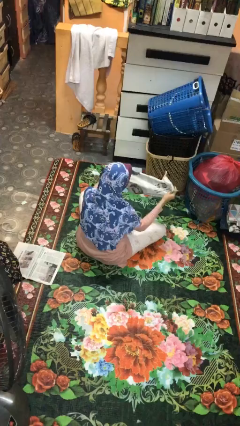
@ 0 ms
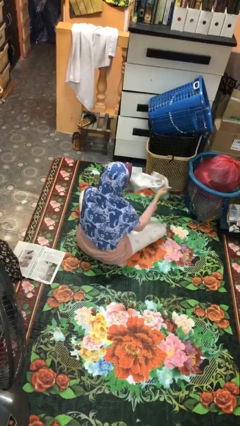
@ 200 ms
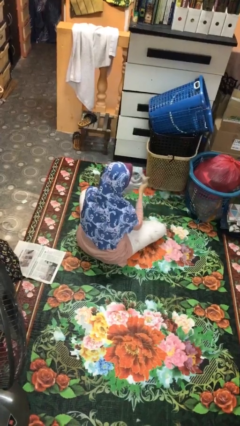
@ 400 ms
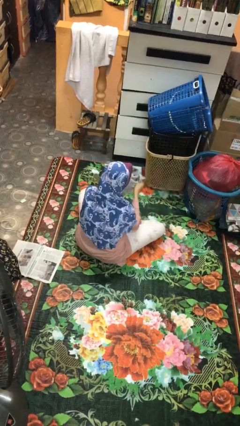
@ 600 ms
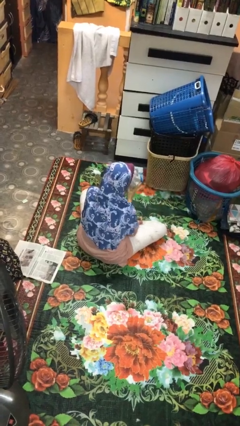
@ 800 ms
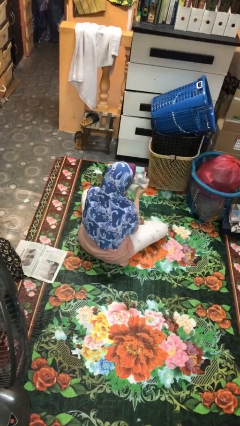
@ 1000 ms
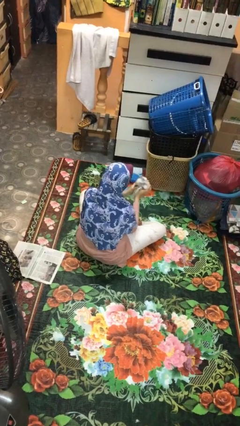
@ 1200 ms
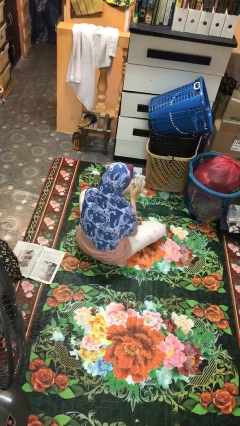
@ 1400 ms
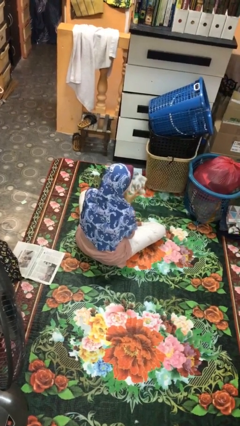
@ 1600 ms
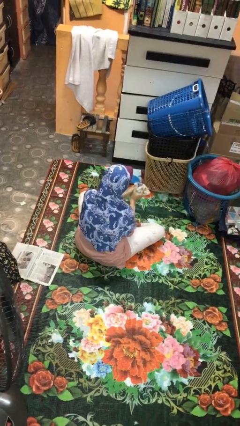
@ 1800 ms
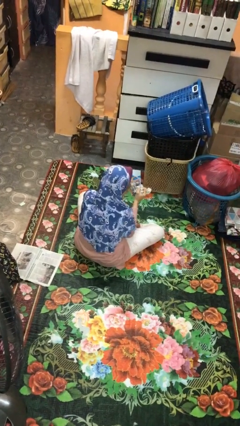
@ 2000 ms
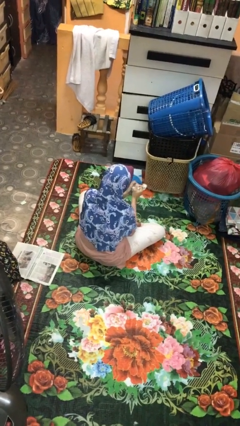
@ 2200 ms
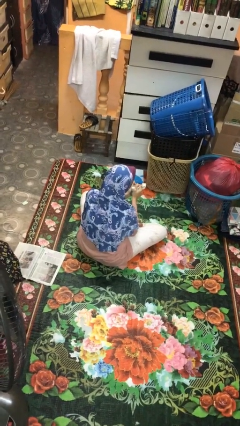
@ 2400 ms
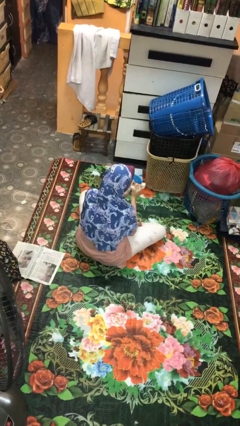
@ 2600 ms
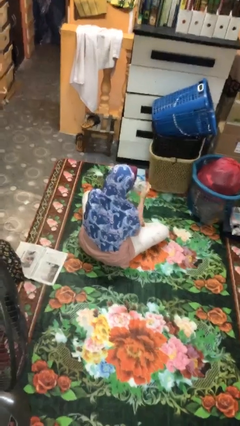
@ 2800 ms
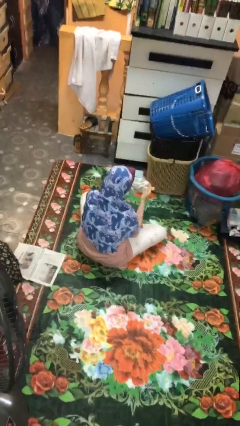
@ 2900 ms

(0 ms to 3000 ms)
person crumples paper

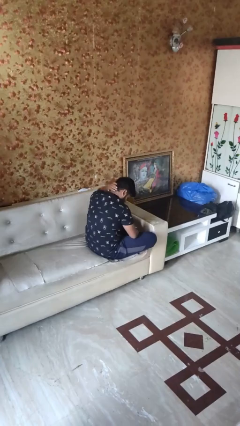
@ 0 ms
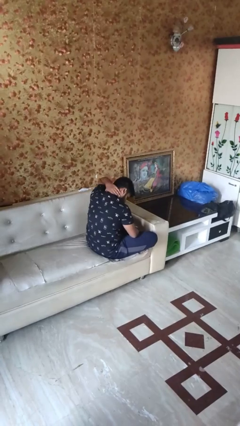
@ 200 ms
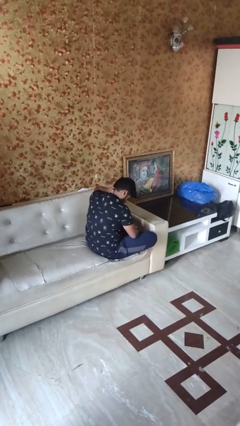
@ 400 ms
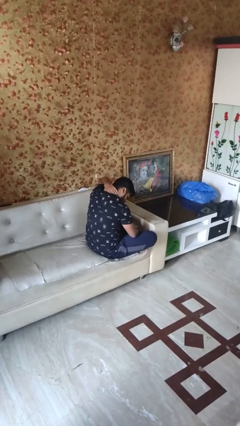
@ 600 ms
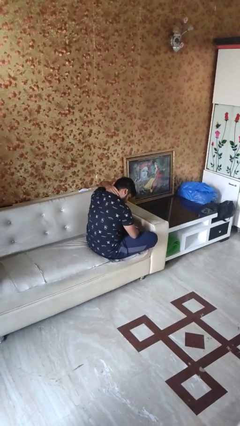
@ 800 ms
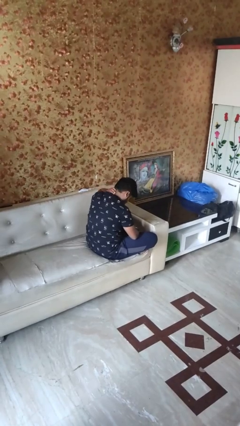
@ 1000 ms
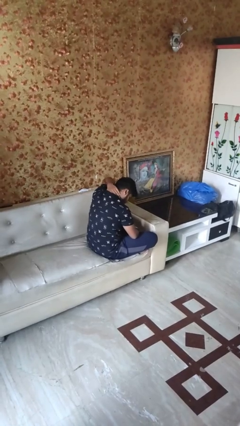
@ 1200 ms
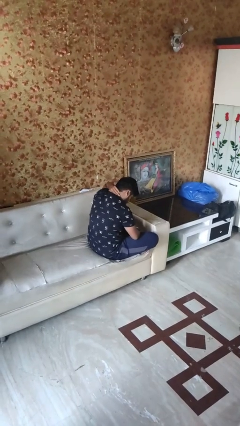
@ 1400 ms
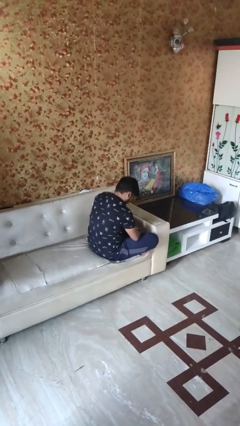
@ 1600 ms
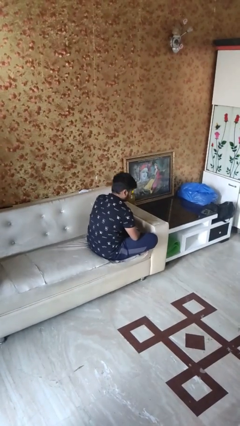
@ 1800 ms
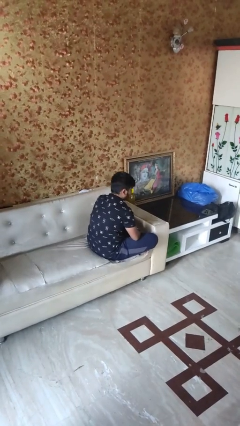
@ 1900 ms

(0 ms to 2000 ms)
person rubs neck

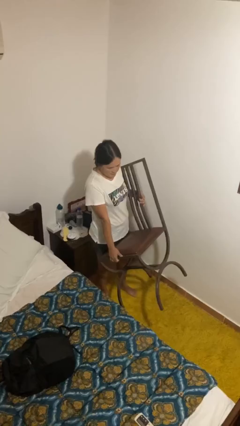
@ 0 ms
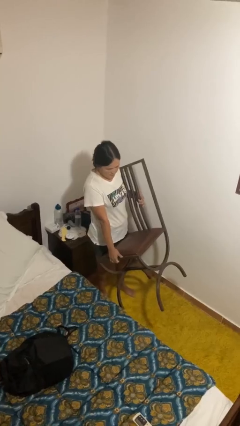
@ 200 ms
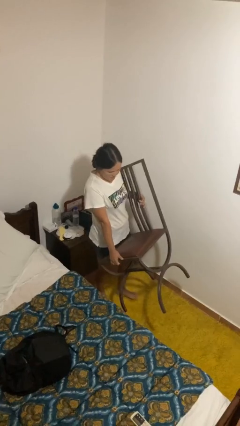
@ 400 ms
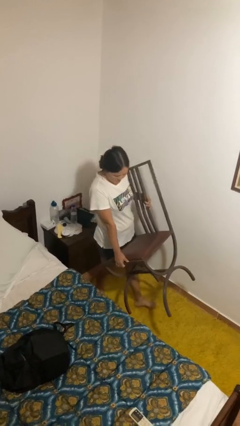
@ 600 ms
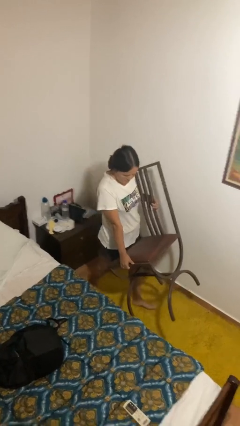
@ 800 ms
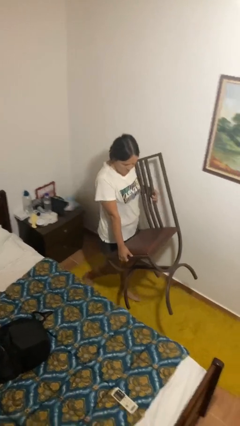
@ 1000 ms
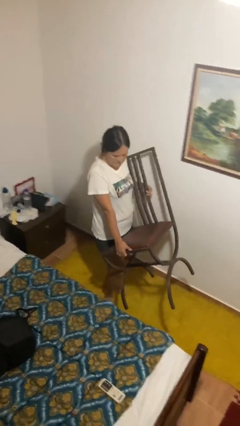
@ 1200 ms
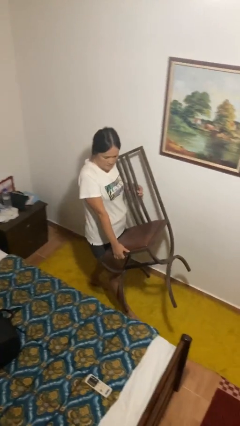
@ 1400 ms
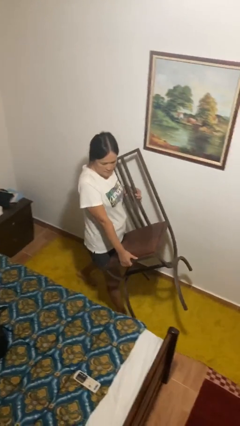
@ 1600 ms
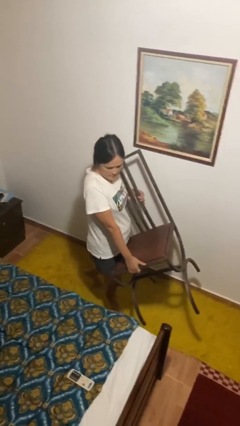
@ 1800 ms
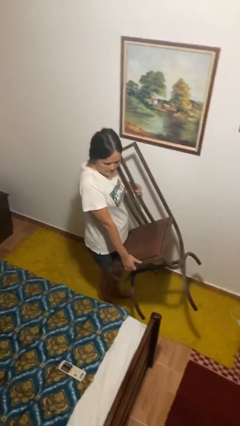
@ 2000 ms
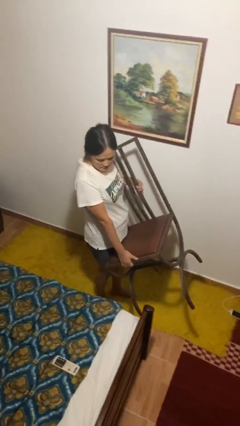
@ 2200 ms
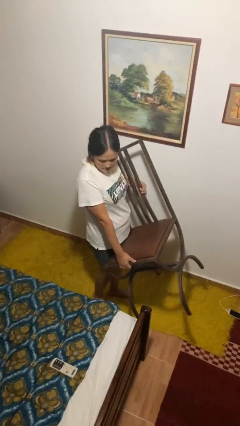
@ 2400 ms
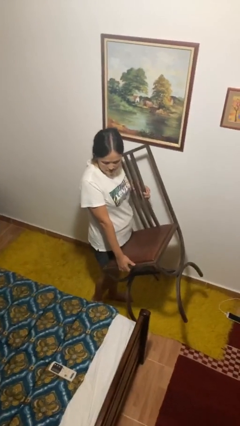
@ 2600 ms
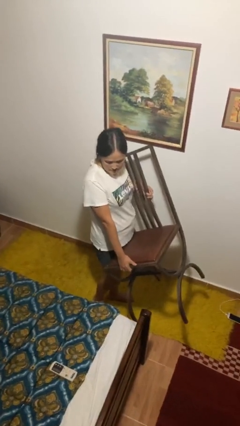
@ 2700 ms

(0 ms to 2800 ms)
person carries furniture

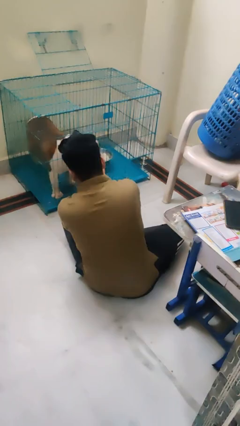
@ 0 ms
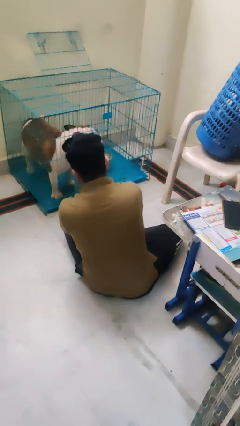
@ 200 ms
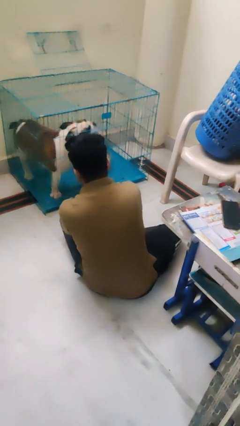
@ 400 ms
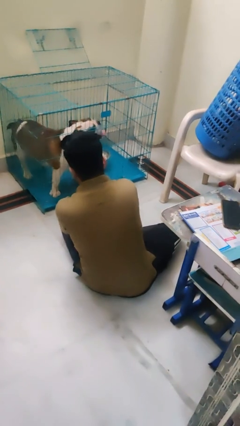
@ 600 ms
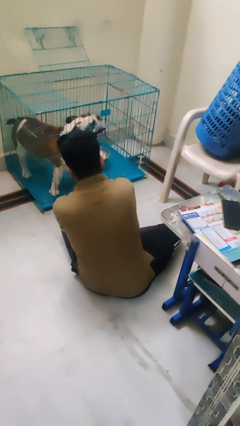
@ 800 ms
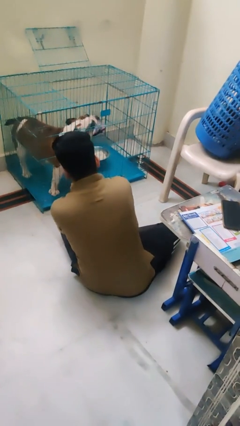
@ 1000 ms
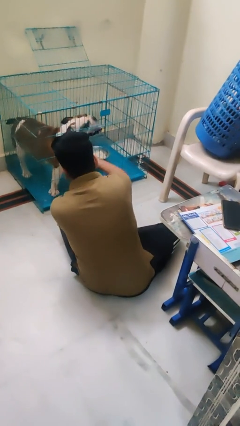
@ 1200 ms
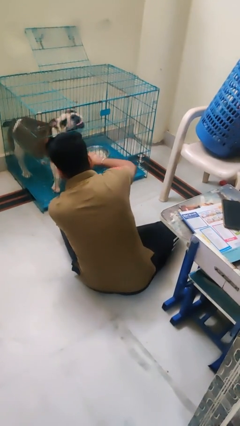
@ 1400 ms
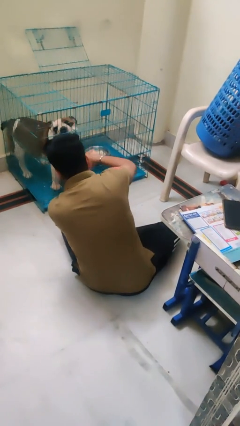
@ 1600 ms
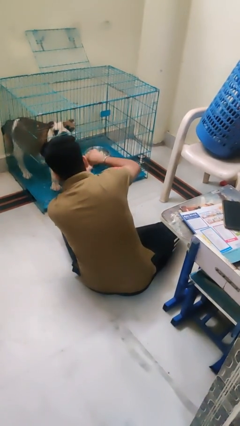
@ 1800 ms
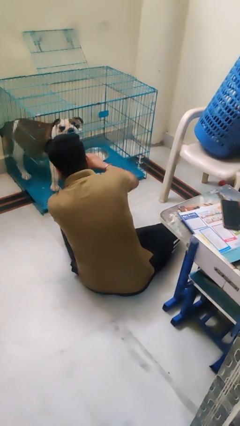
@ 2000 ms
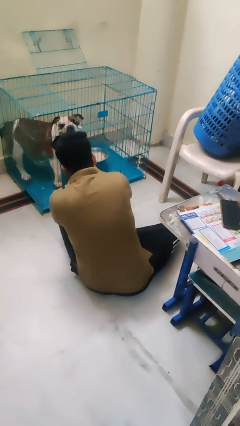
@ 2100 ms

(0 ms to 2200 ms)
person uncrates dog

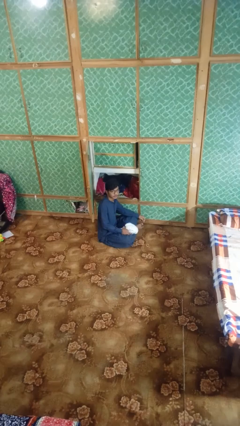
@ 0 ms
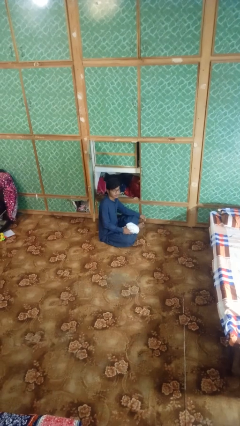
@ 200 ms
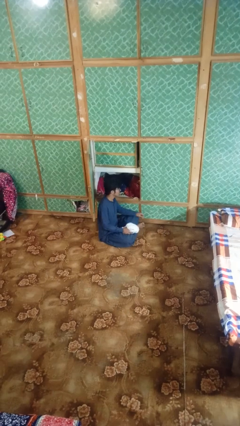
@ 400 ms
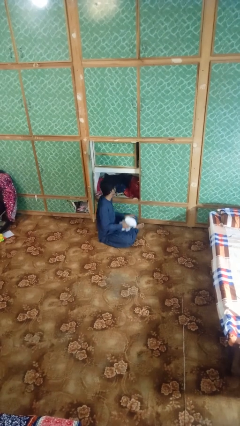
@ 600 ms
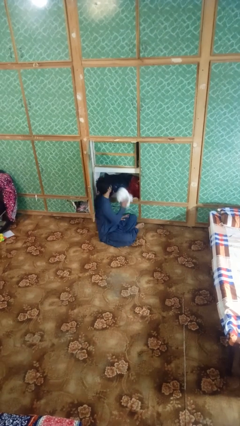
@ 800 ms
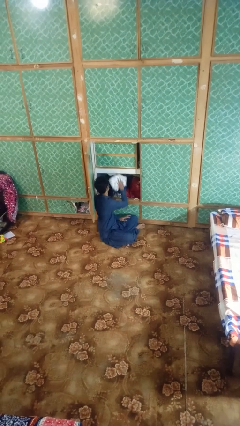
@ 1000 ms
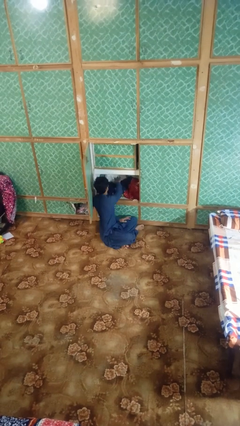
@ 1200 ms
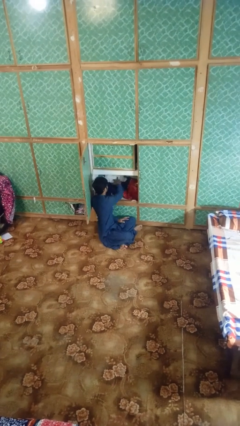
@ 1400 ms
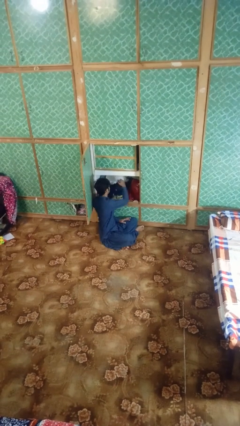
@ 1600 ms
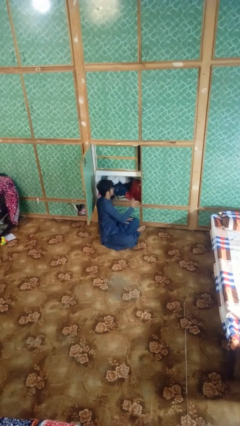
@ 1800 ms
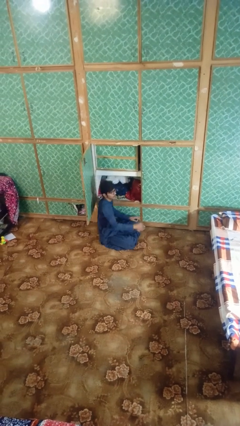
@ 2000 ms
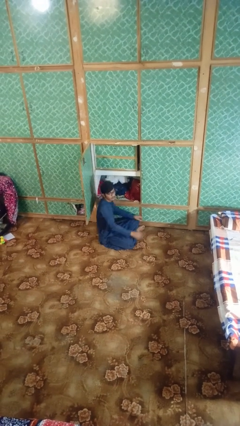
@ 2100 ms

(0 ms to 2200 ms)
person puts clothes into dresser

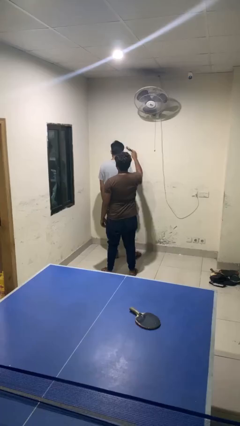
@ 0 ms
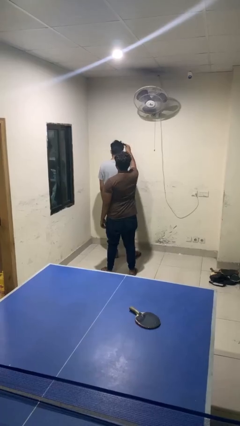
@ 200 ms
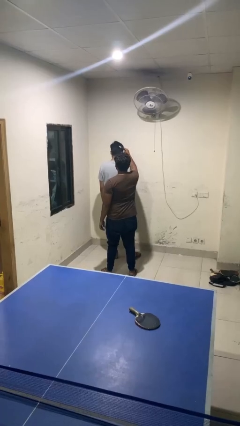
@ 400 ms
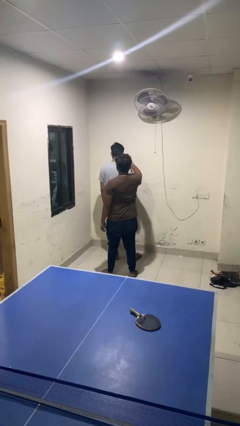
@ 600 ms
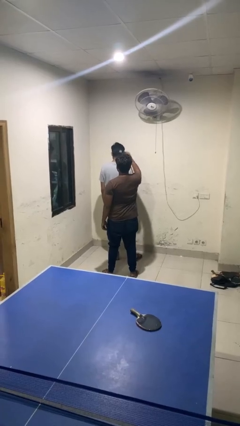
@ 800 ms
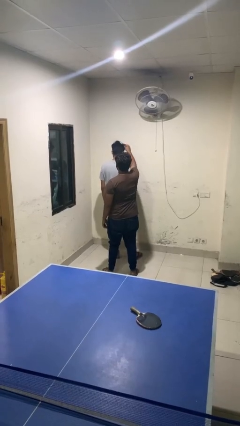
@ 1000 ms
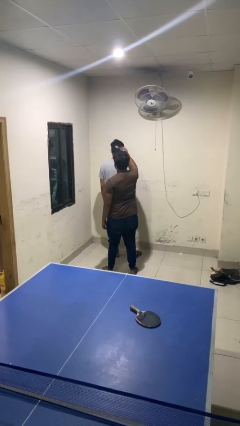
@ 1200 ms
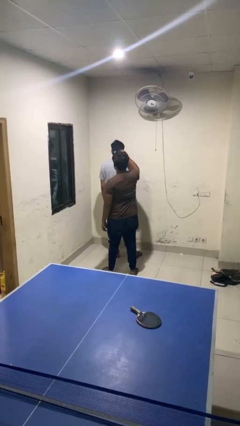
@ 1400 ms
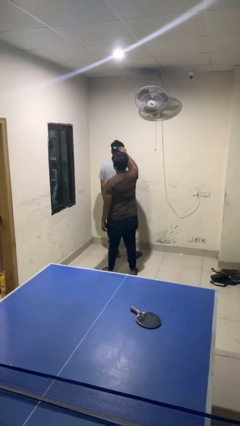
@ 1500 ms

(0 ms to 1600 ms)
person brushes hair of person

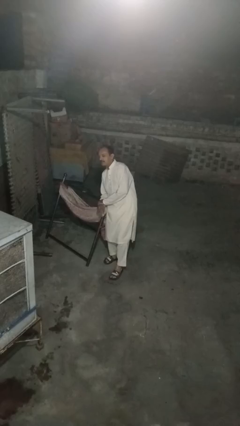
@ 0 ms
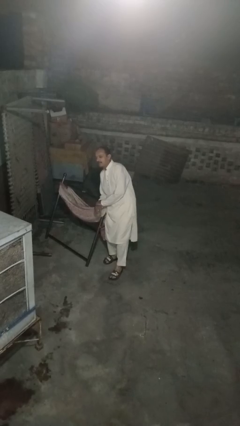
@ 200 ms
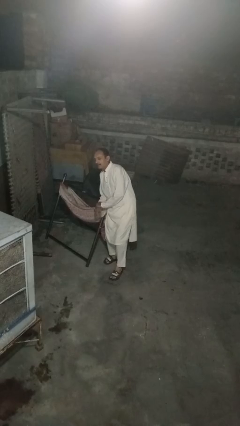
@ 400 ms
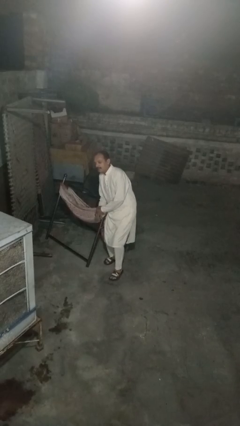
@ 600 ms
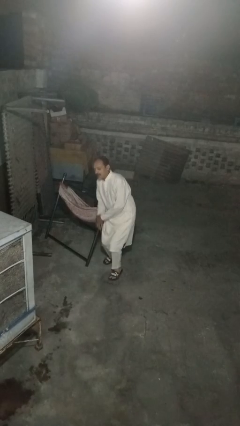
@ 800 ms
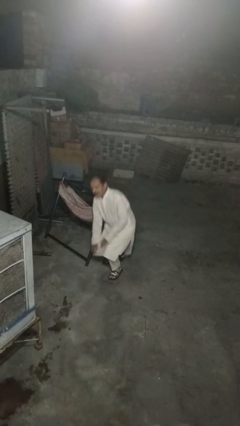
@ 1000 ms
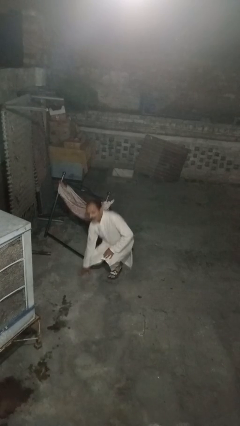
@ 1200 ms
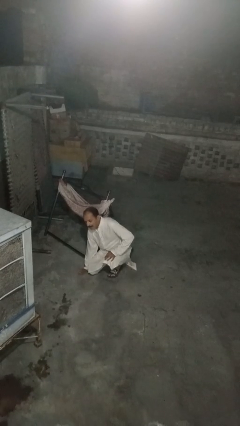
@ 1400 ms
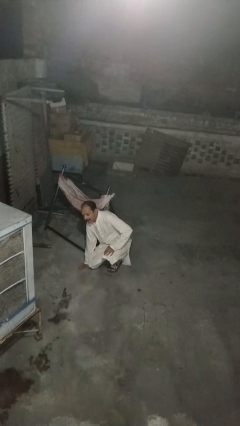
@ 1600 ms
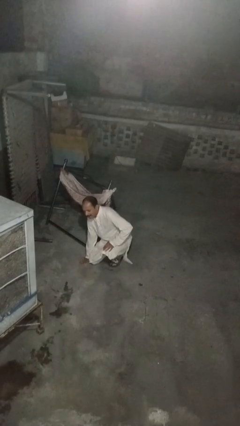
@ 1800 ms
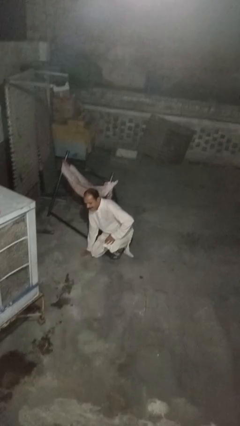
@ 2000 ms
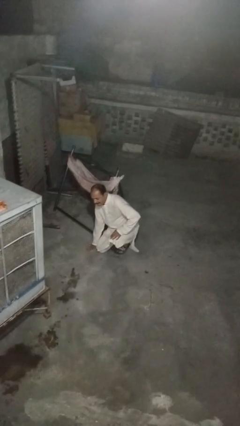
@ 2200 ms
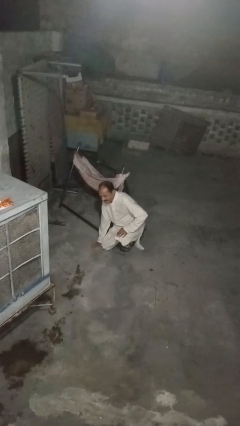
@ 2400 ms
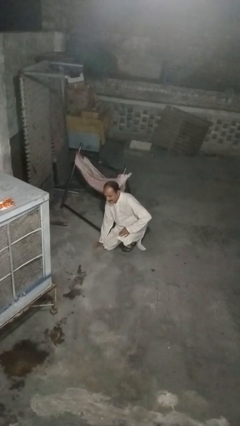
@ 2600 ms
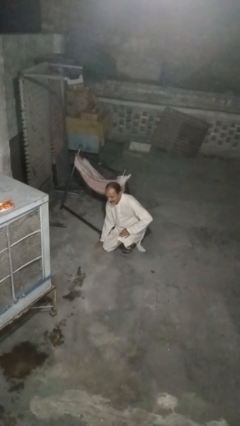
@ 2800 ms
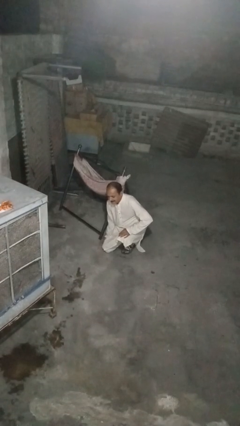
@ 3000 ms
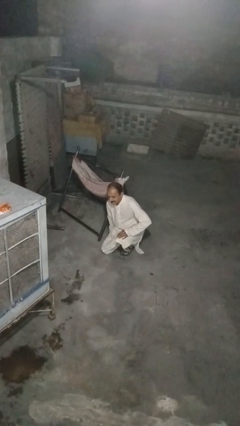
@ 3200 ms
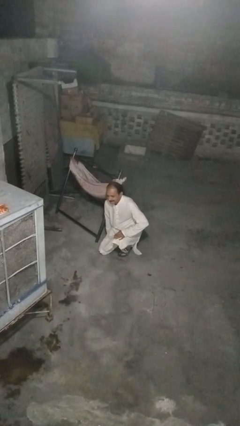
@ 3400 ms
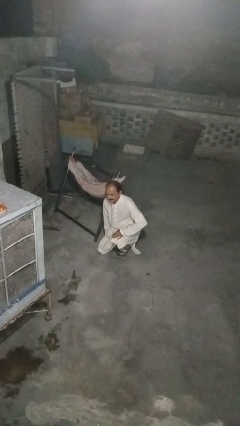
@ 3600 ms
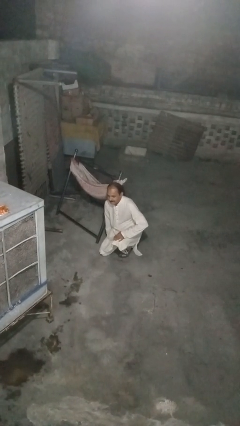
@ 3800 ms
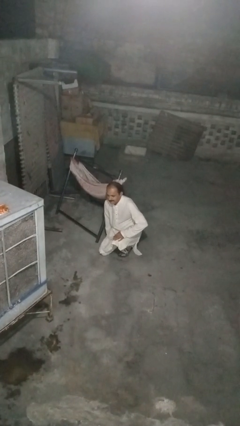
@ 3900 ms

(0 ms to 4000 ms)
person falls while standing
